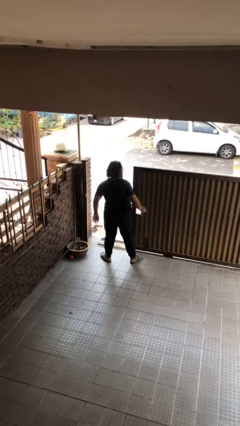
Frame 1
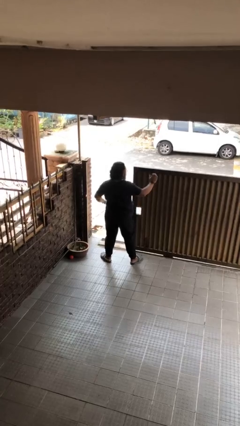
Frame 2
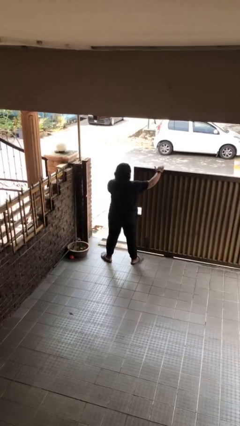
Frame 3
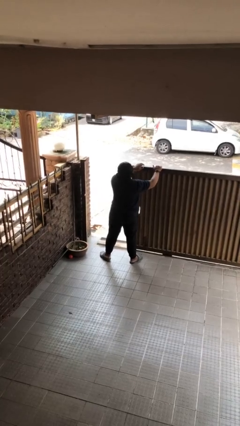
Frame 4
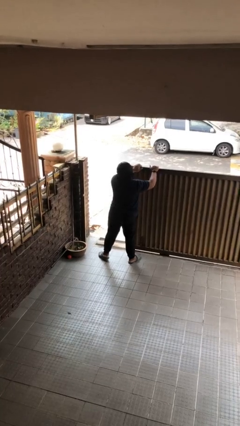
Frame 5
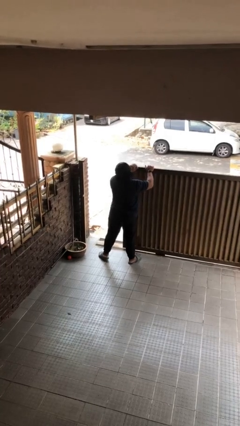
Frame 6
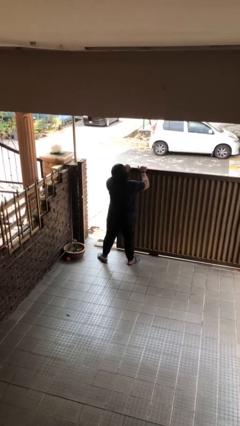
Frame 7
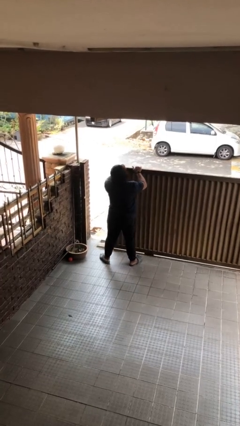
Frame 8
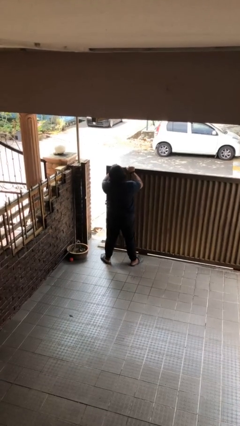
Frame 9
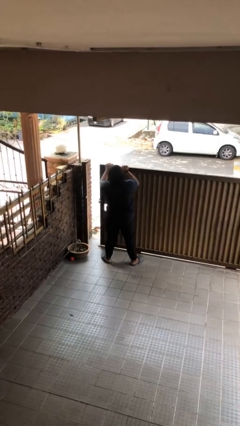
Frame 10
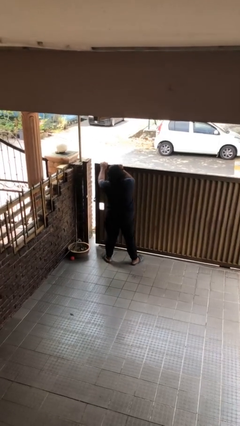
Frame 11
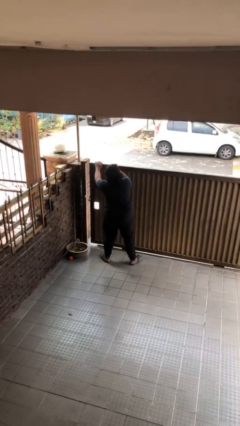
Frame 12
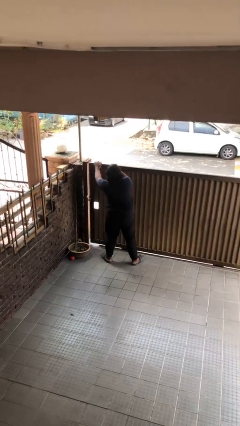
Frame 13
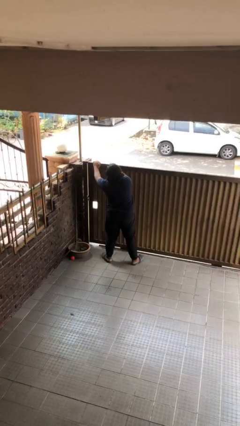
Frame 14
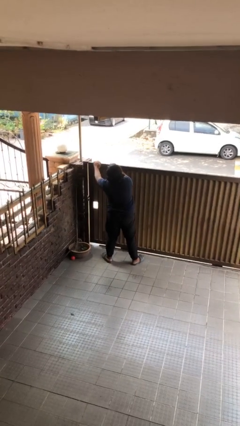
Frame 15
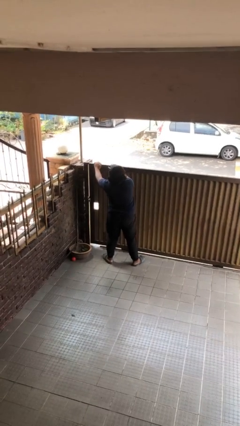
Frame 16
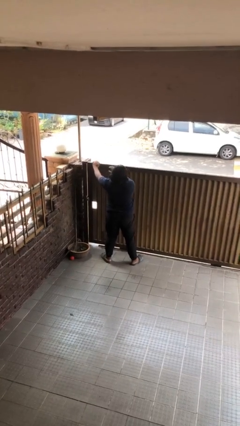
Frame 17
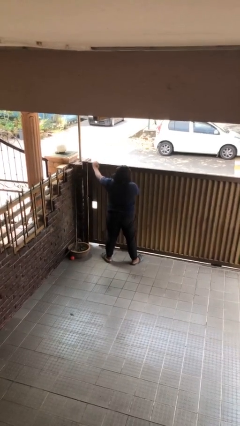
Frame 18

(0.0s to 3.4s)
person closes facility door

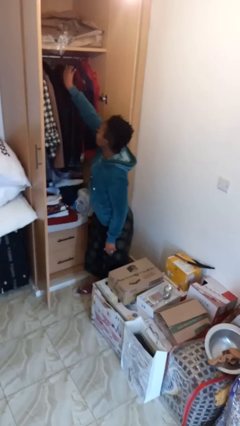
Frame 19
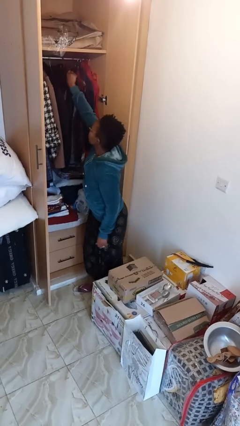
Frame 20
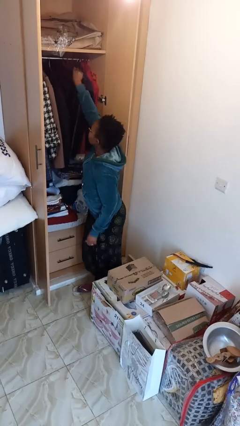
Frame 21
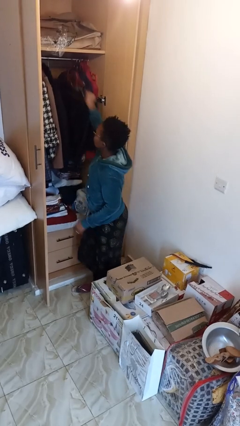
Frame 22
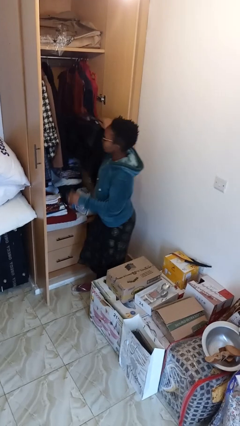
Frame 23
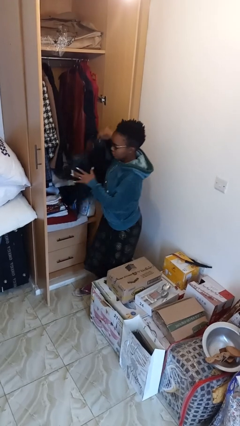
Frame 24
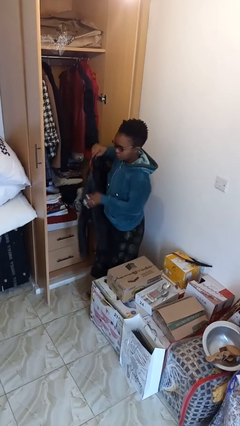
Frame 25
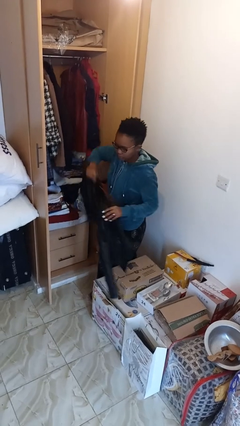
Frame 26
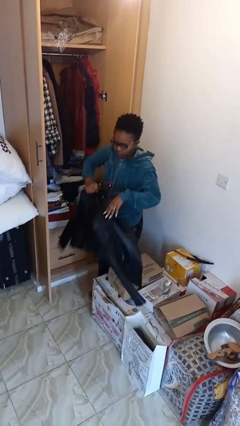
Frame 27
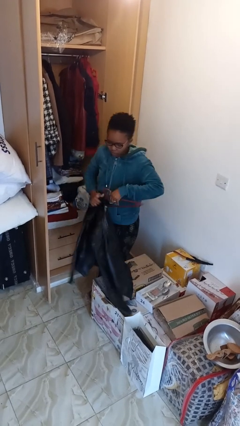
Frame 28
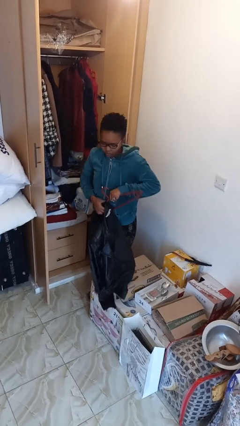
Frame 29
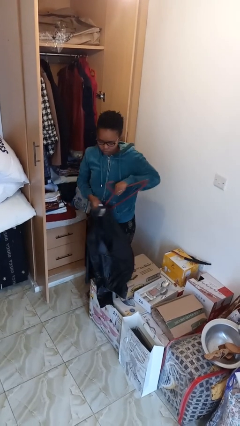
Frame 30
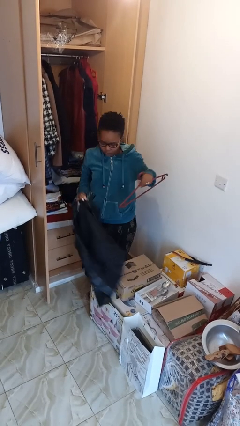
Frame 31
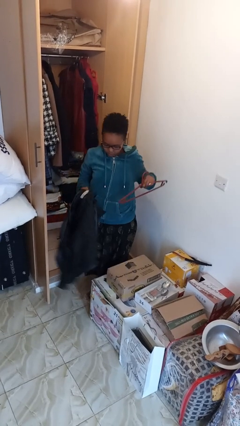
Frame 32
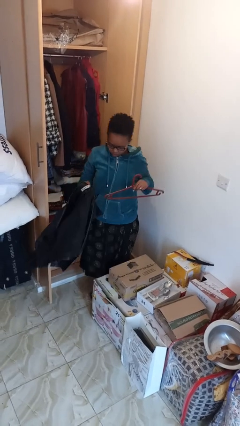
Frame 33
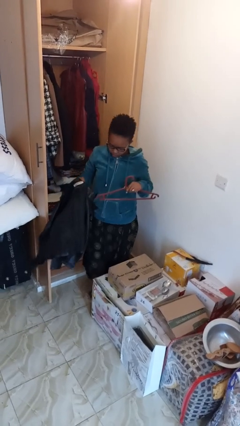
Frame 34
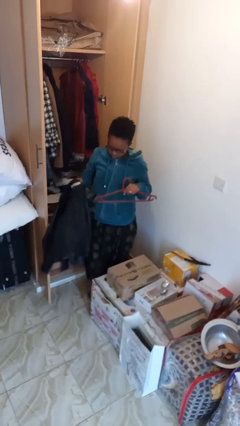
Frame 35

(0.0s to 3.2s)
person takes clothes from closet

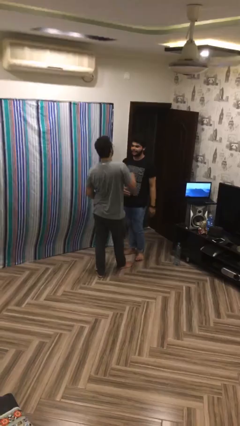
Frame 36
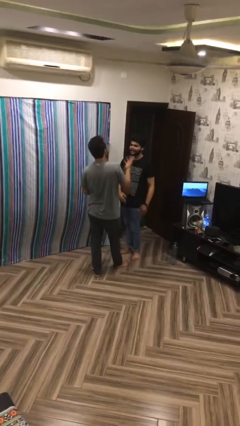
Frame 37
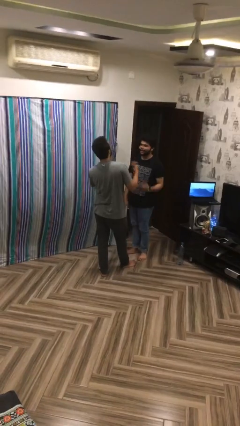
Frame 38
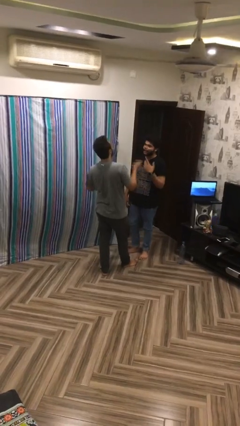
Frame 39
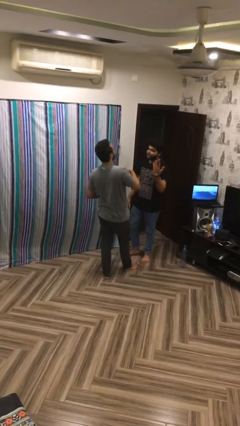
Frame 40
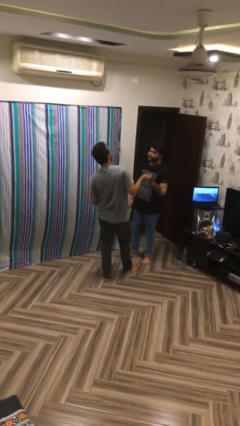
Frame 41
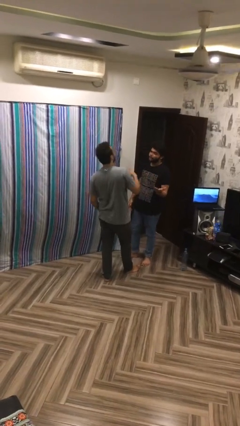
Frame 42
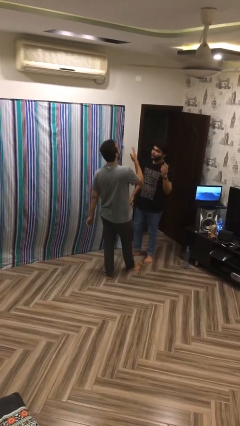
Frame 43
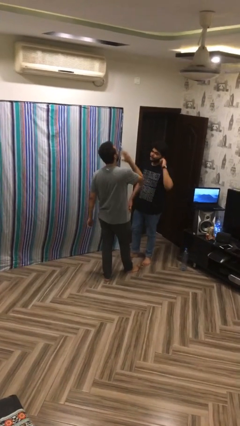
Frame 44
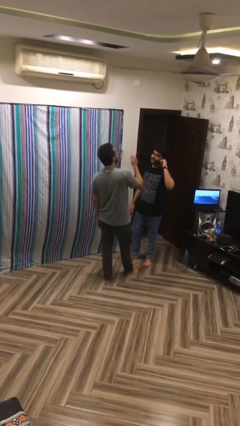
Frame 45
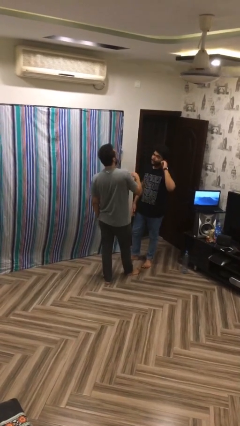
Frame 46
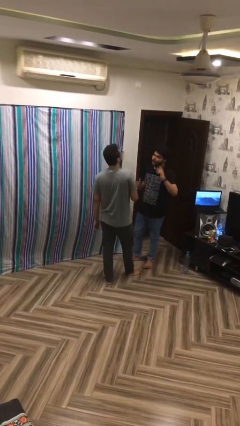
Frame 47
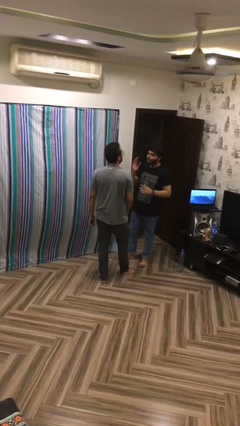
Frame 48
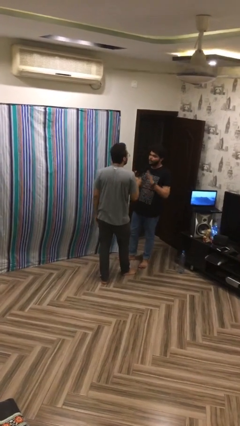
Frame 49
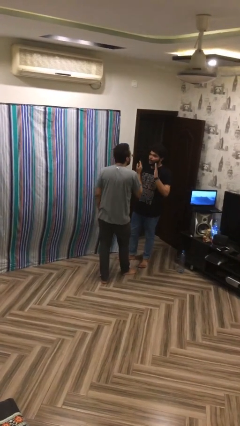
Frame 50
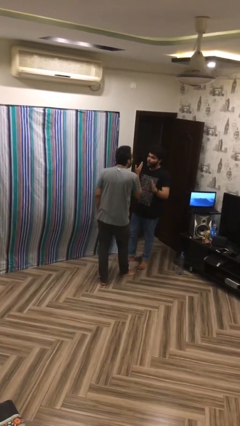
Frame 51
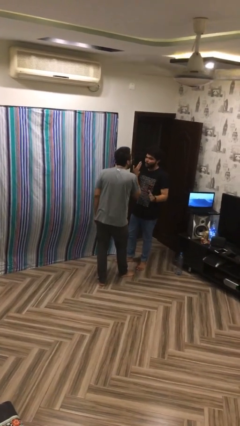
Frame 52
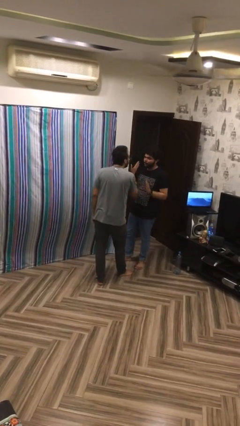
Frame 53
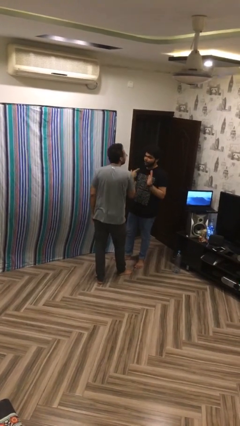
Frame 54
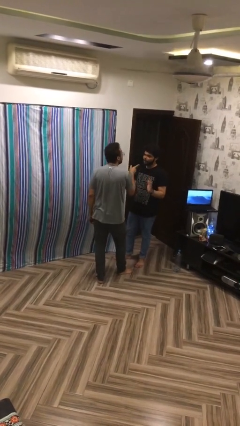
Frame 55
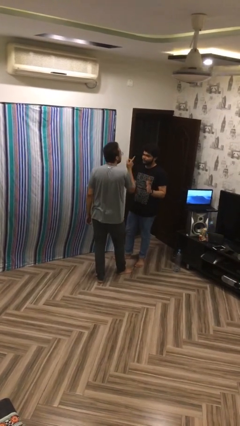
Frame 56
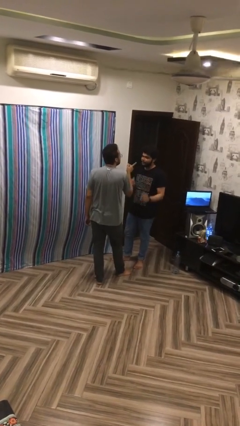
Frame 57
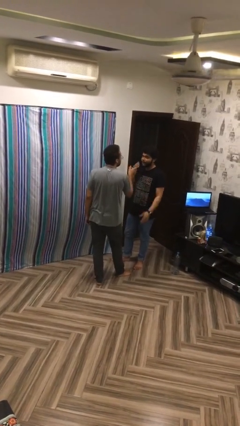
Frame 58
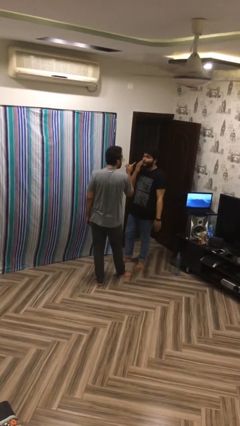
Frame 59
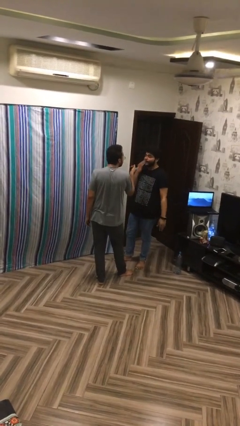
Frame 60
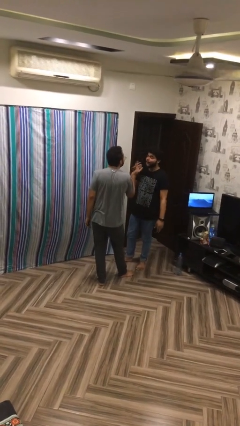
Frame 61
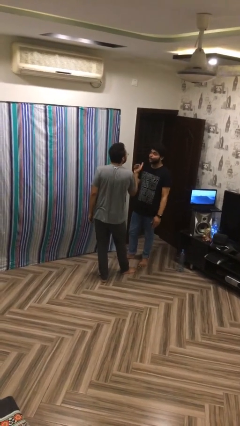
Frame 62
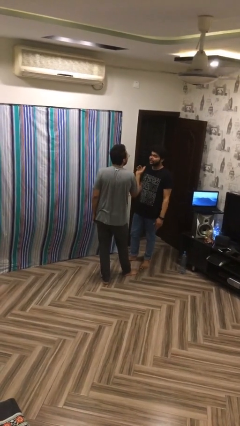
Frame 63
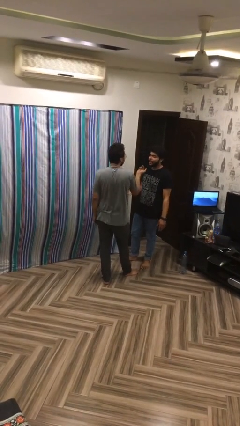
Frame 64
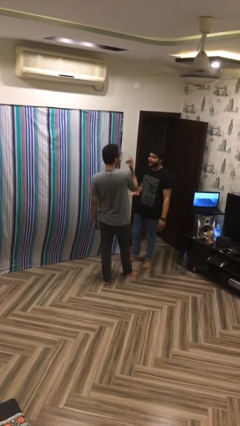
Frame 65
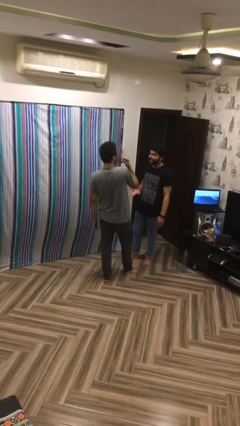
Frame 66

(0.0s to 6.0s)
person talks to person

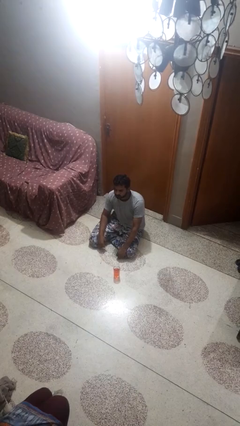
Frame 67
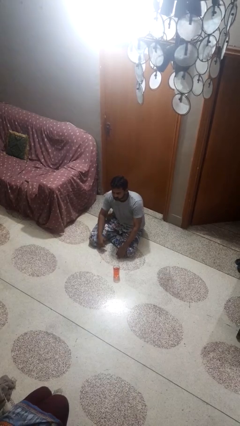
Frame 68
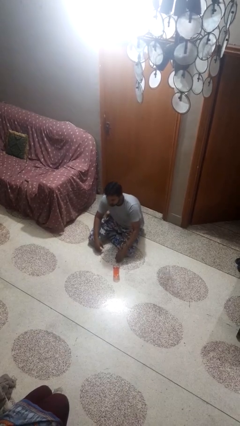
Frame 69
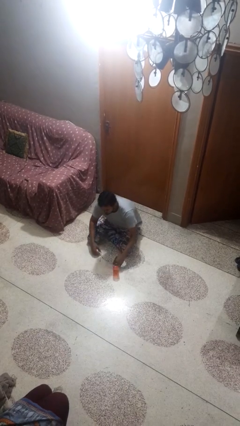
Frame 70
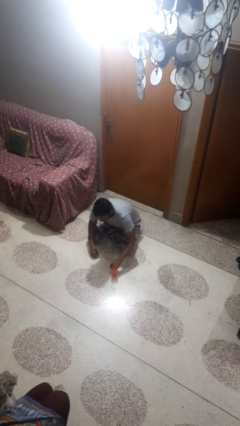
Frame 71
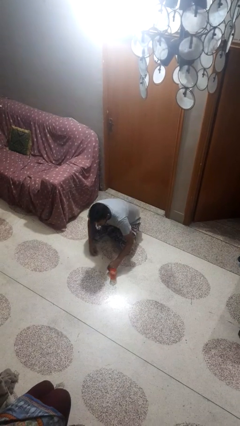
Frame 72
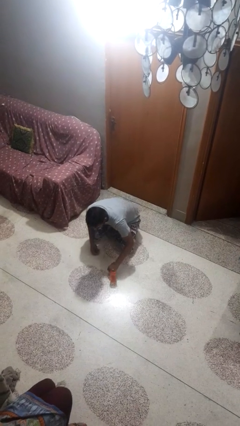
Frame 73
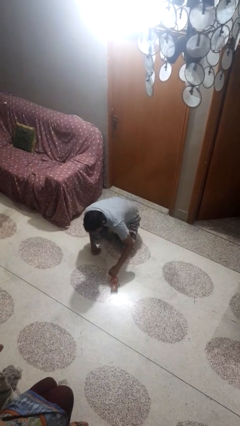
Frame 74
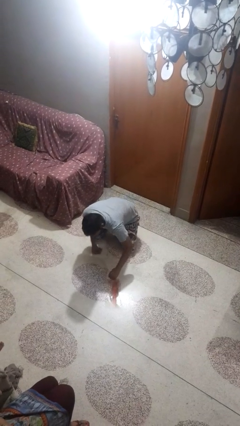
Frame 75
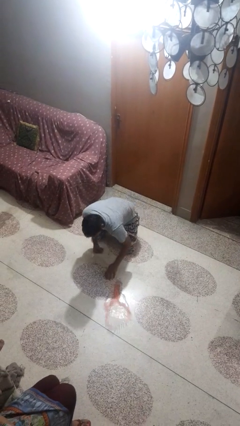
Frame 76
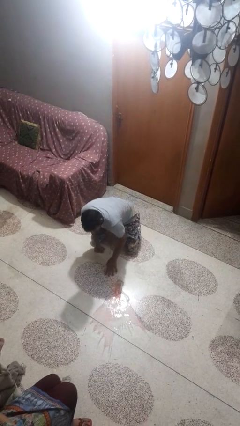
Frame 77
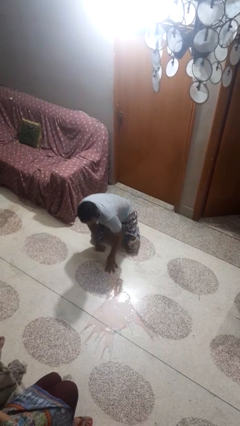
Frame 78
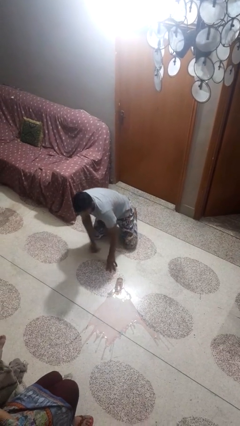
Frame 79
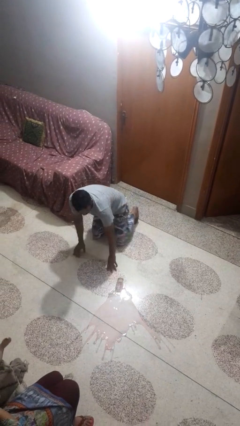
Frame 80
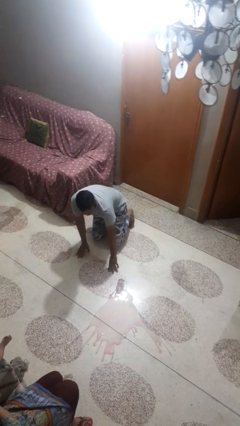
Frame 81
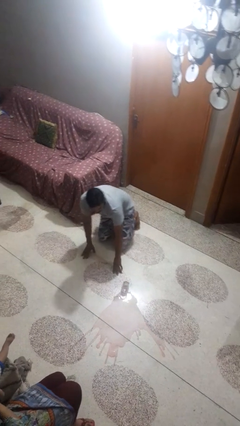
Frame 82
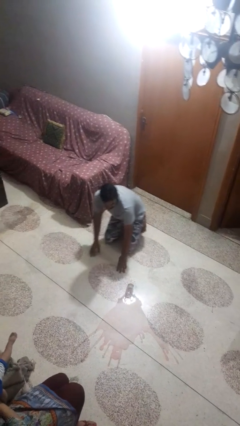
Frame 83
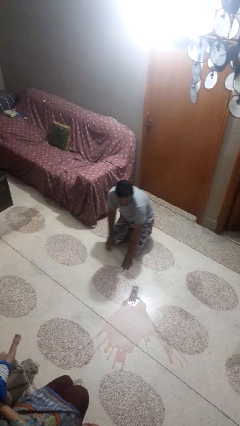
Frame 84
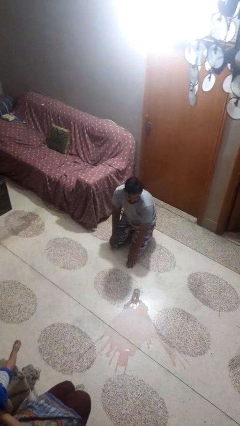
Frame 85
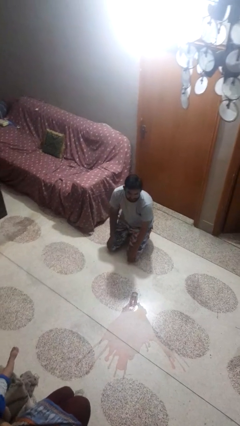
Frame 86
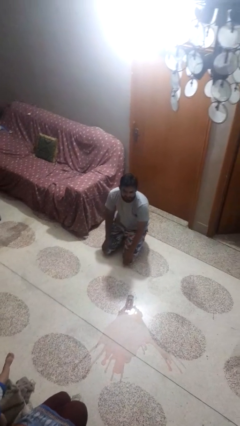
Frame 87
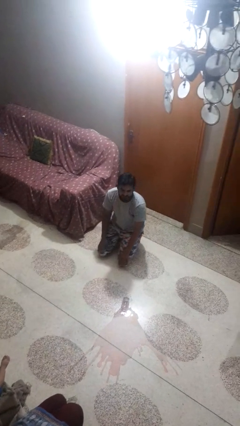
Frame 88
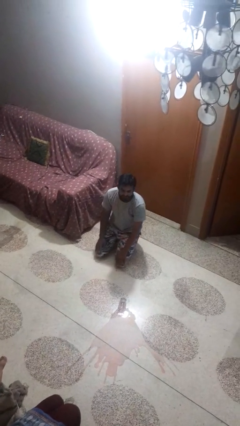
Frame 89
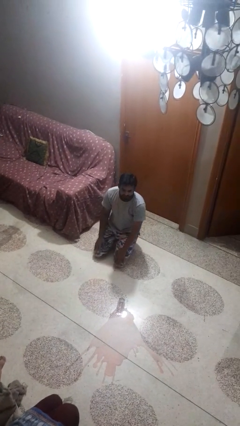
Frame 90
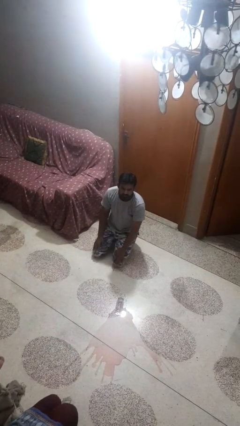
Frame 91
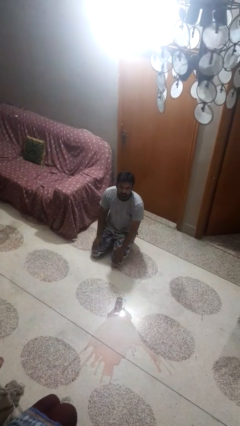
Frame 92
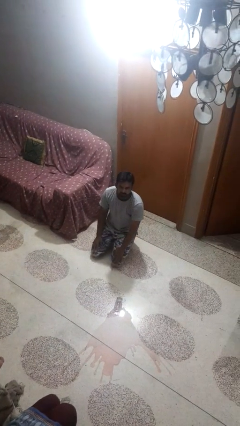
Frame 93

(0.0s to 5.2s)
person spills on floor
